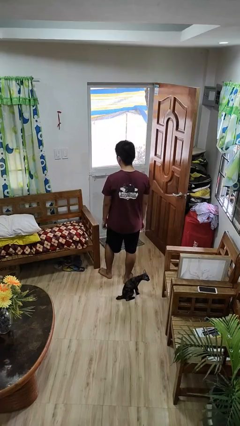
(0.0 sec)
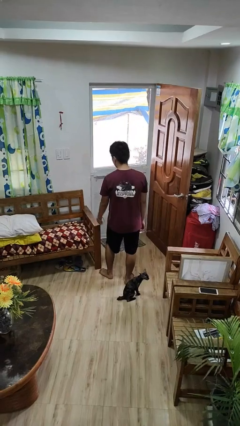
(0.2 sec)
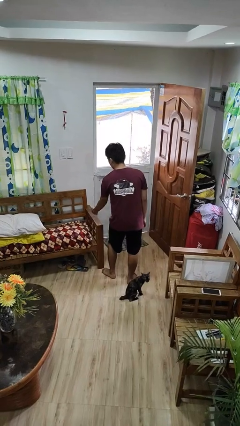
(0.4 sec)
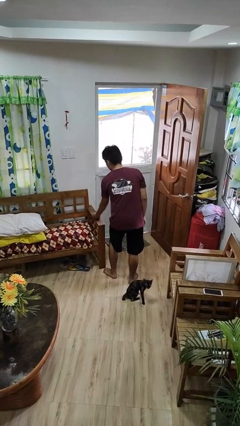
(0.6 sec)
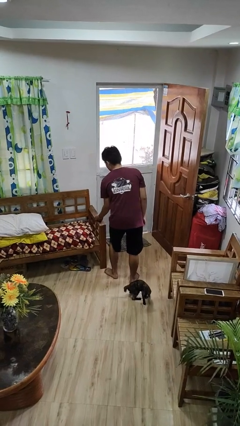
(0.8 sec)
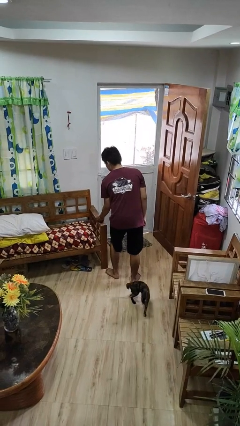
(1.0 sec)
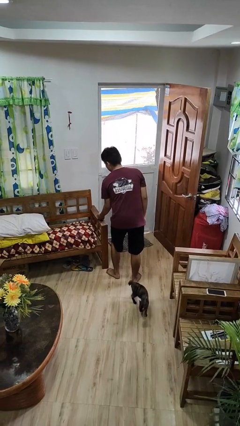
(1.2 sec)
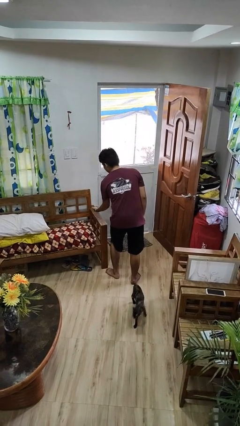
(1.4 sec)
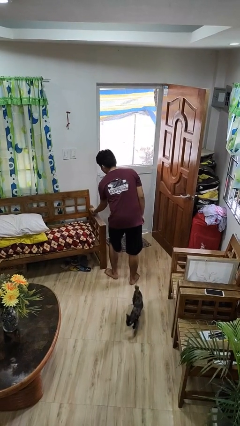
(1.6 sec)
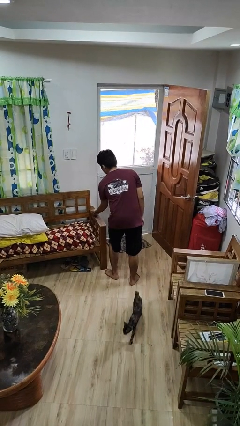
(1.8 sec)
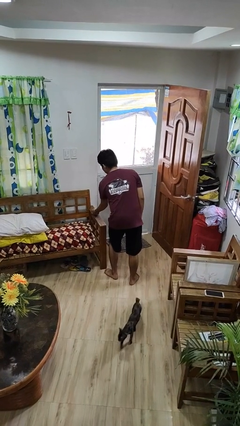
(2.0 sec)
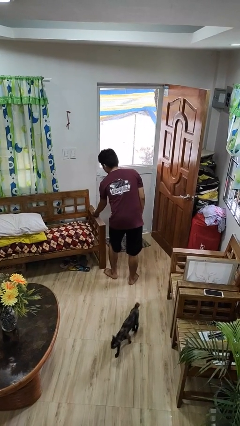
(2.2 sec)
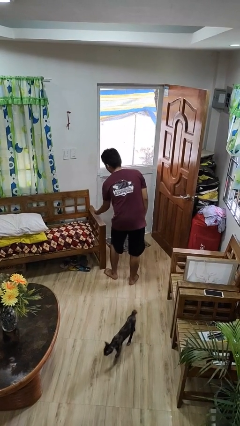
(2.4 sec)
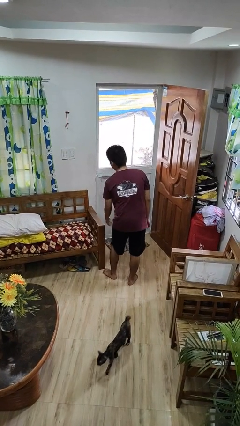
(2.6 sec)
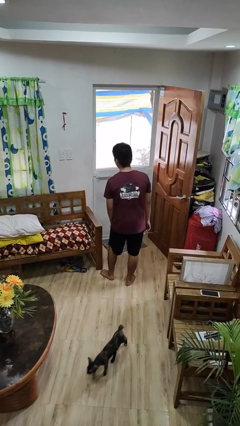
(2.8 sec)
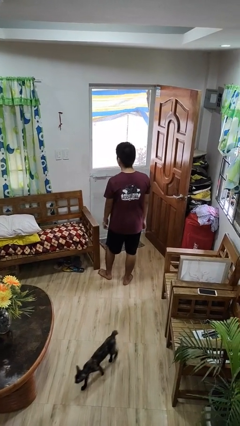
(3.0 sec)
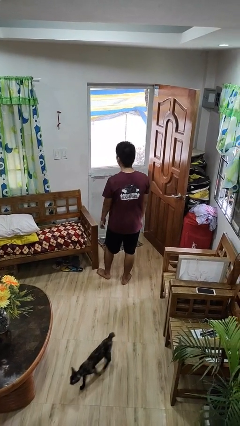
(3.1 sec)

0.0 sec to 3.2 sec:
person taps object with finger

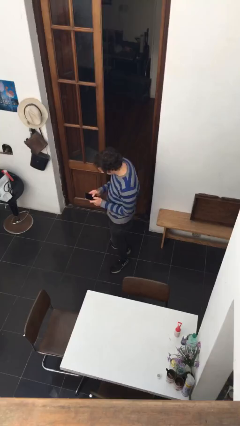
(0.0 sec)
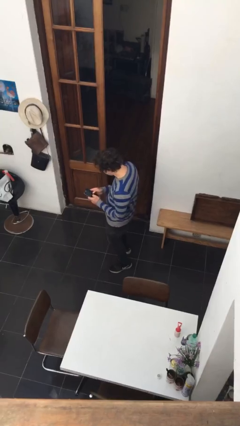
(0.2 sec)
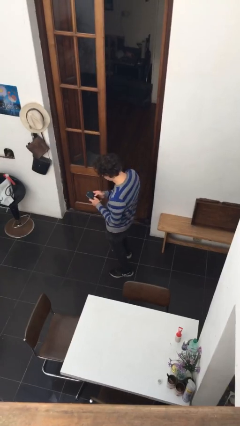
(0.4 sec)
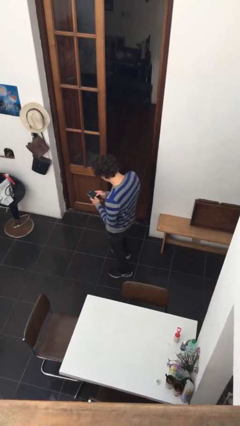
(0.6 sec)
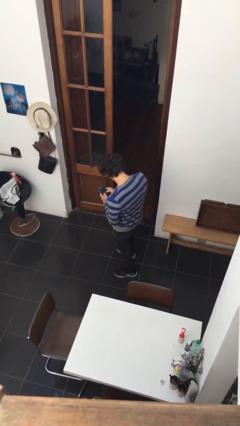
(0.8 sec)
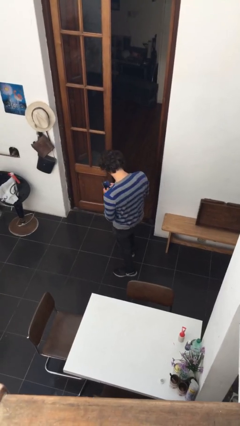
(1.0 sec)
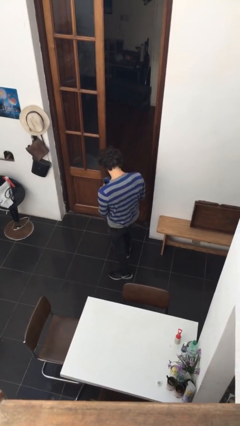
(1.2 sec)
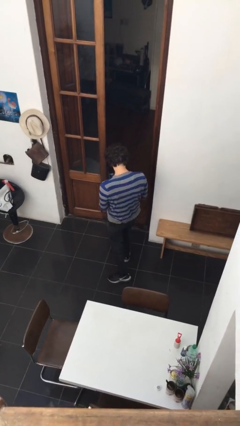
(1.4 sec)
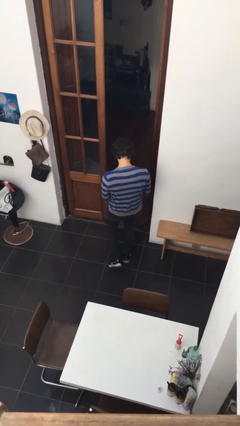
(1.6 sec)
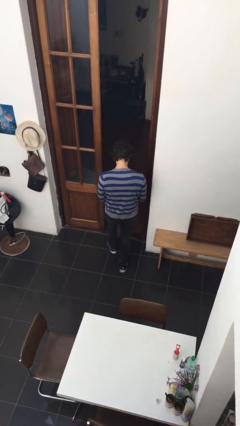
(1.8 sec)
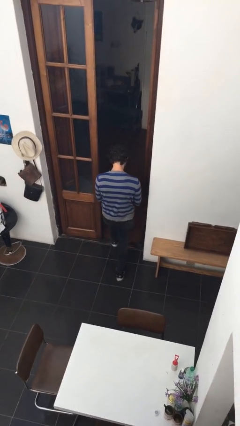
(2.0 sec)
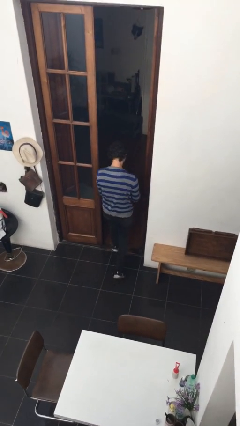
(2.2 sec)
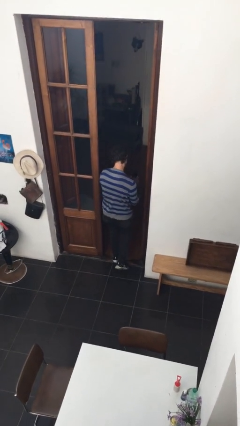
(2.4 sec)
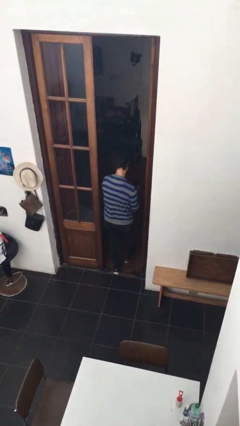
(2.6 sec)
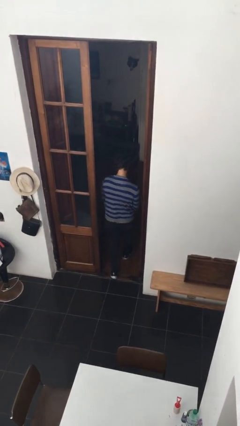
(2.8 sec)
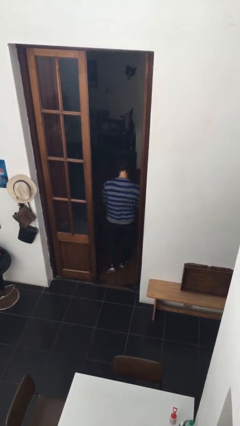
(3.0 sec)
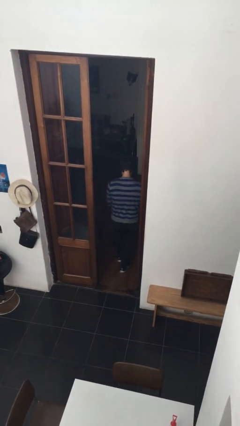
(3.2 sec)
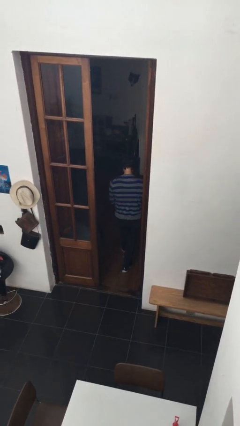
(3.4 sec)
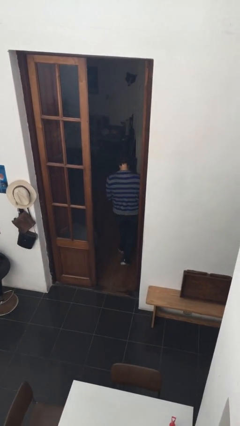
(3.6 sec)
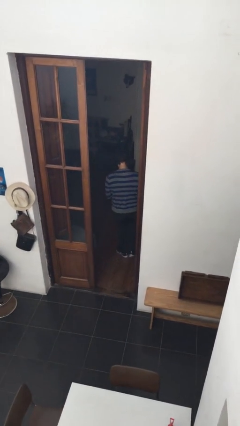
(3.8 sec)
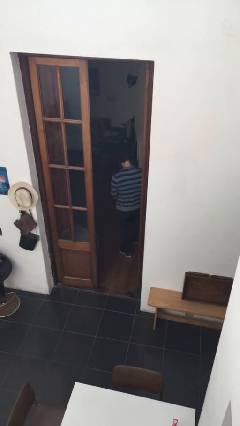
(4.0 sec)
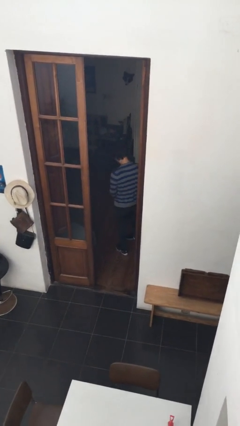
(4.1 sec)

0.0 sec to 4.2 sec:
person exits scene through structure

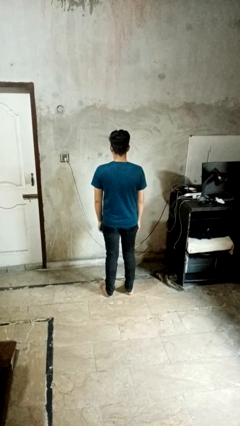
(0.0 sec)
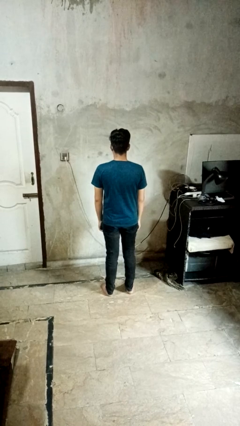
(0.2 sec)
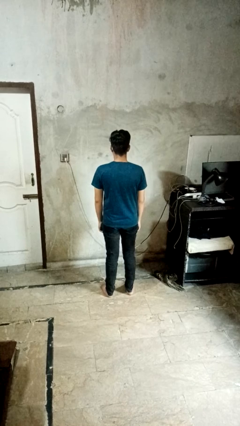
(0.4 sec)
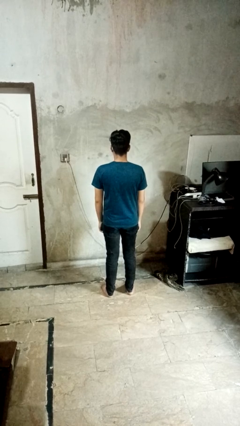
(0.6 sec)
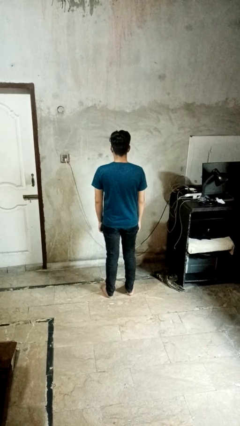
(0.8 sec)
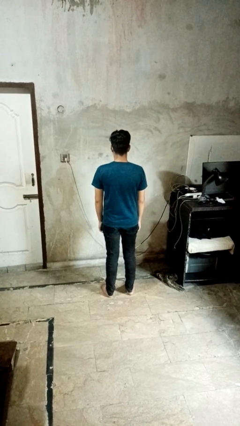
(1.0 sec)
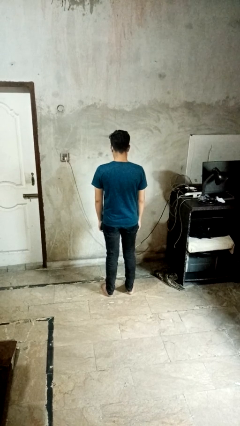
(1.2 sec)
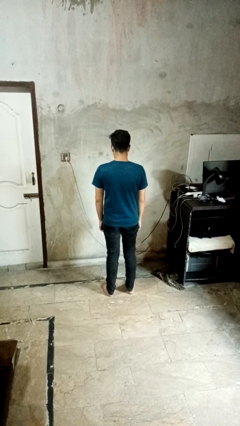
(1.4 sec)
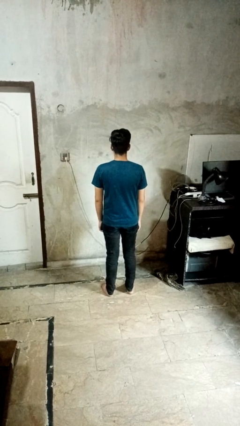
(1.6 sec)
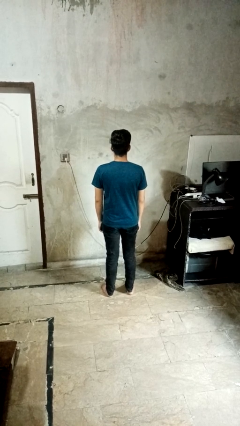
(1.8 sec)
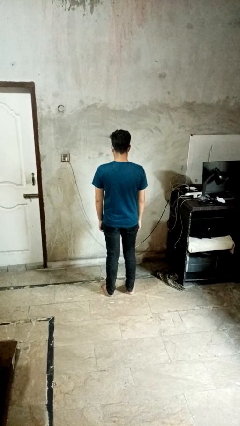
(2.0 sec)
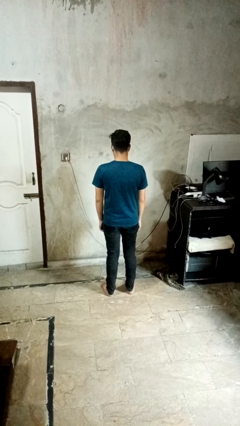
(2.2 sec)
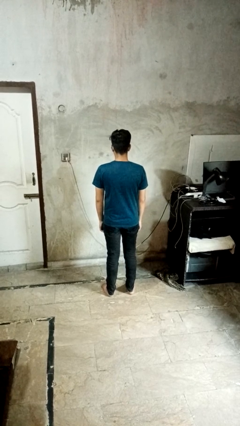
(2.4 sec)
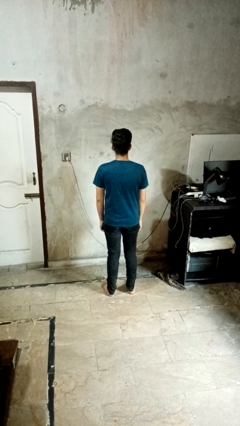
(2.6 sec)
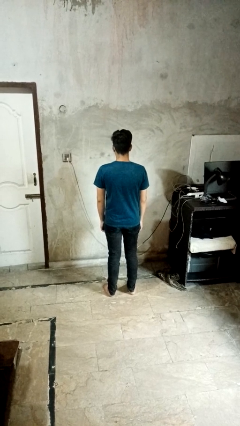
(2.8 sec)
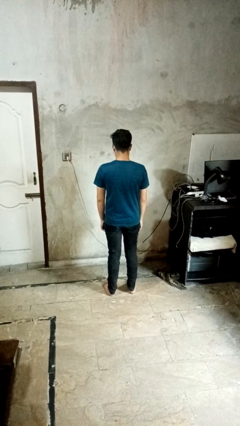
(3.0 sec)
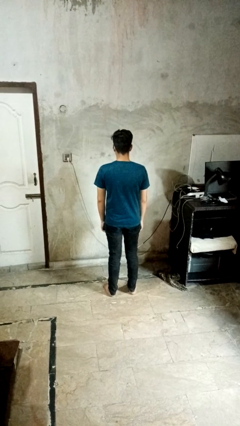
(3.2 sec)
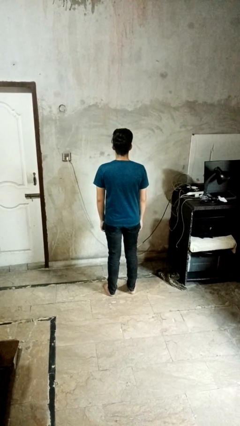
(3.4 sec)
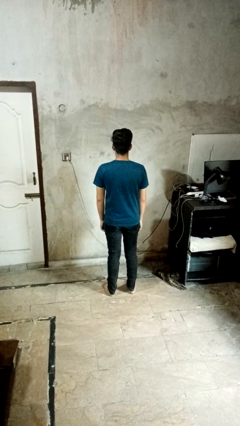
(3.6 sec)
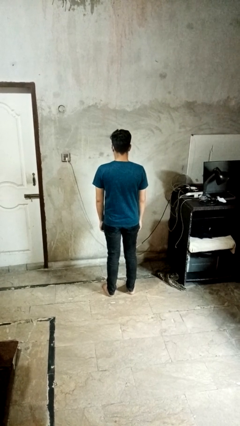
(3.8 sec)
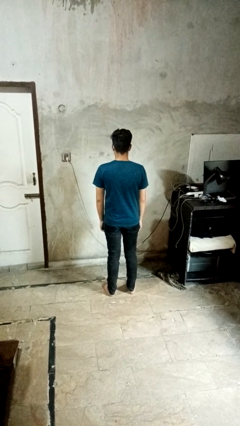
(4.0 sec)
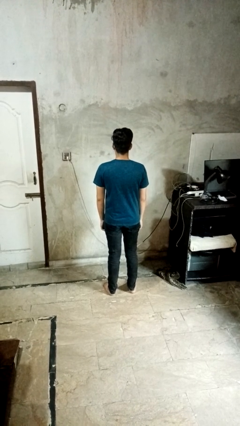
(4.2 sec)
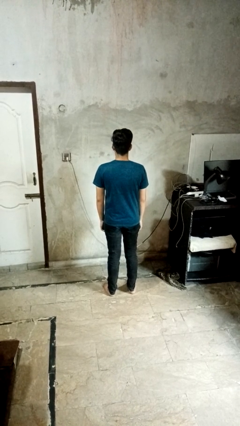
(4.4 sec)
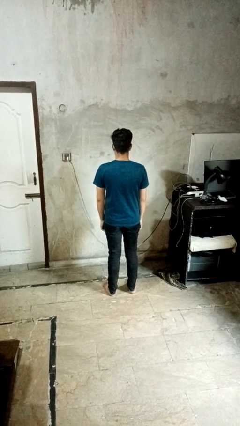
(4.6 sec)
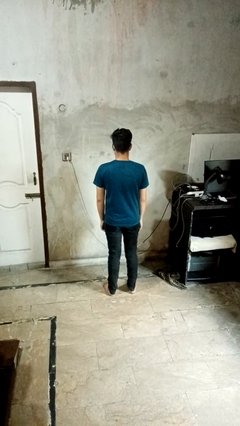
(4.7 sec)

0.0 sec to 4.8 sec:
person nods head

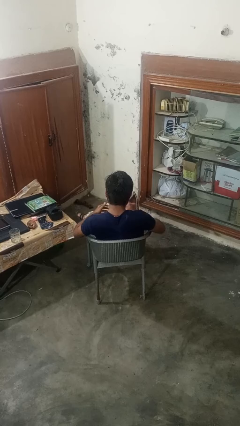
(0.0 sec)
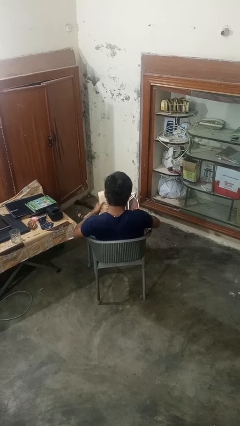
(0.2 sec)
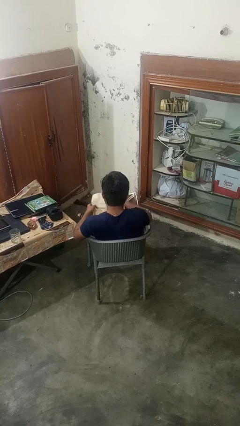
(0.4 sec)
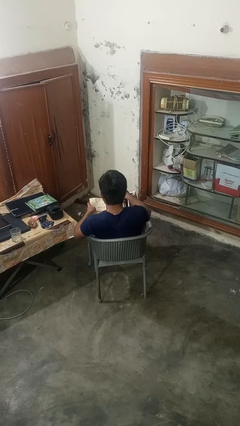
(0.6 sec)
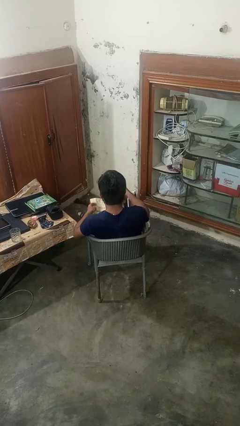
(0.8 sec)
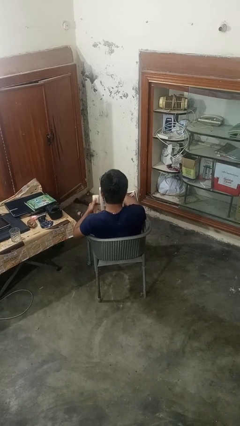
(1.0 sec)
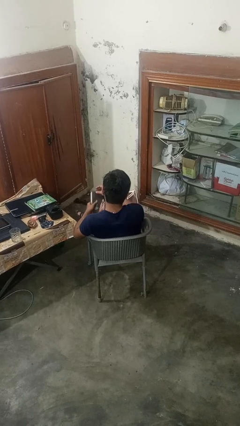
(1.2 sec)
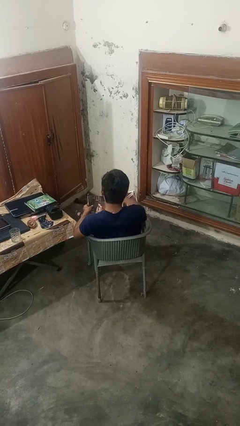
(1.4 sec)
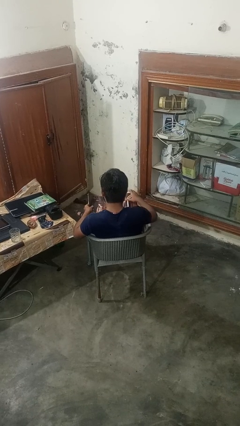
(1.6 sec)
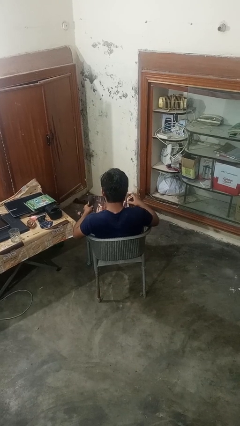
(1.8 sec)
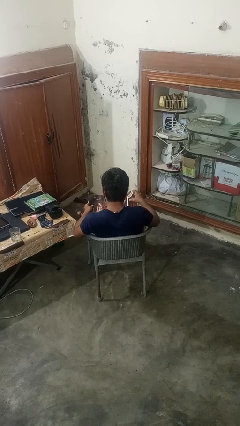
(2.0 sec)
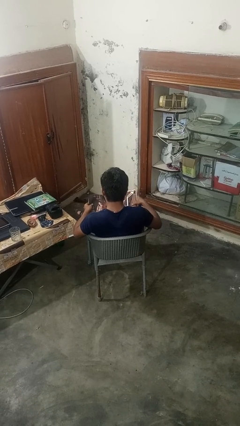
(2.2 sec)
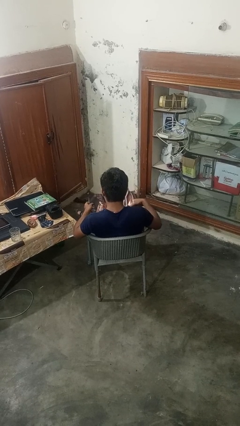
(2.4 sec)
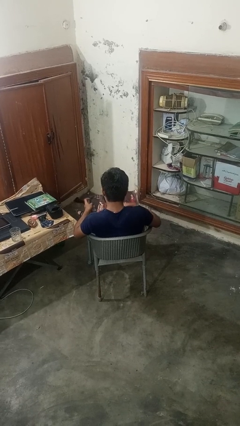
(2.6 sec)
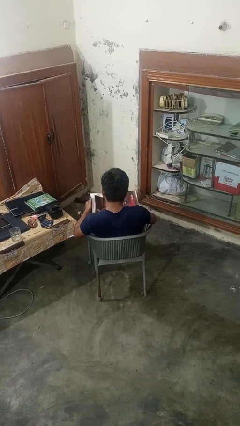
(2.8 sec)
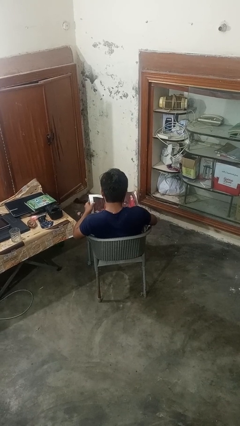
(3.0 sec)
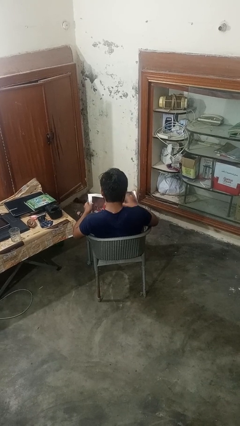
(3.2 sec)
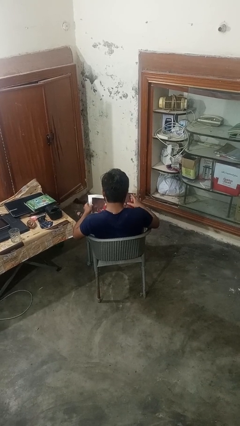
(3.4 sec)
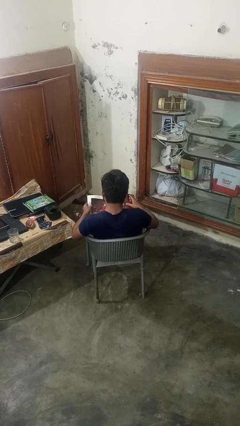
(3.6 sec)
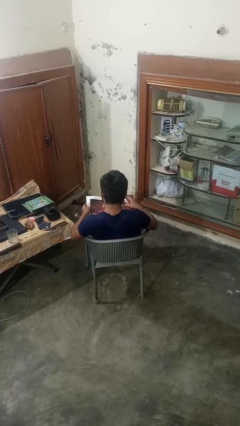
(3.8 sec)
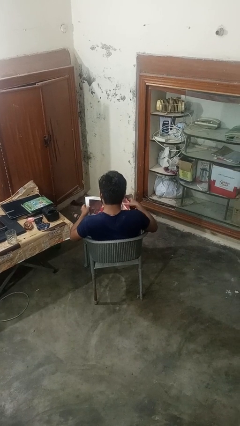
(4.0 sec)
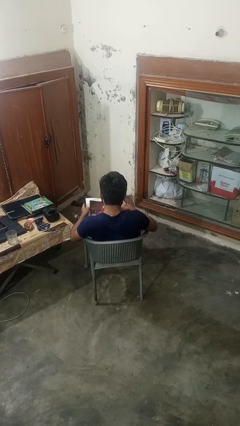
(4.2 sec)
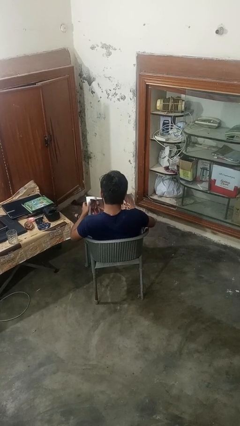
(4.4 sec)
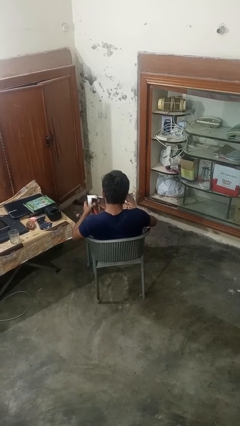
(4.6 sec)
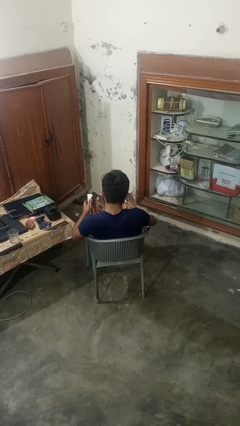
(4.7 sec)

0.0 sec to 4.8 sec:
person reads magazine

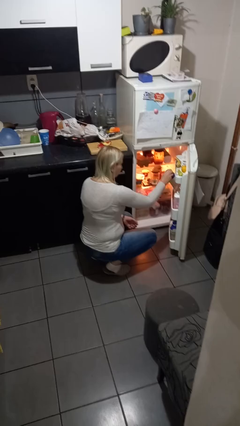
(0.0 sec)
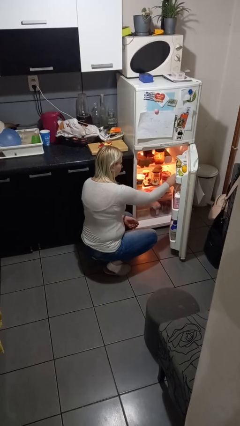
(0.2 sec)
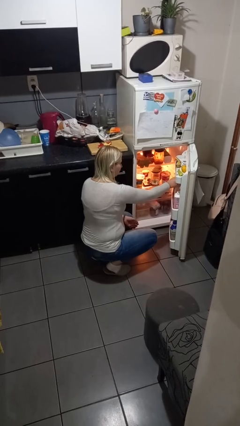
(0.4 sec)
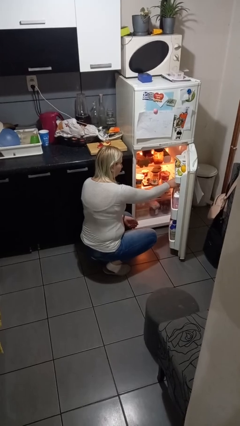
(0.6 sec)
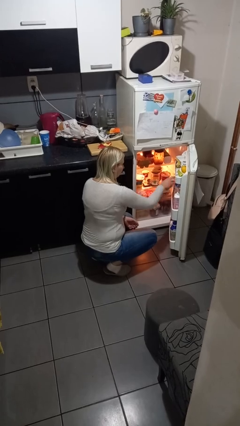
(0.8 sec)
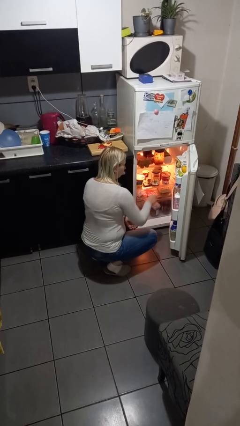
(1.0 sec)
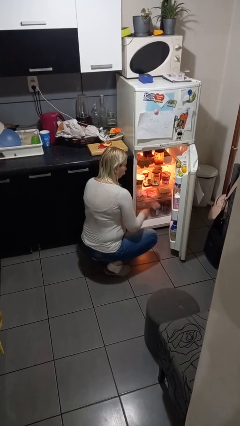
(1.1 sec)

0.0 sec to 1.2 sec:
person puts object into refrigerator
